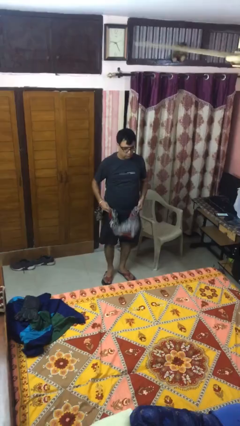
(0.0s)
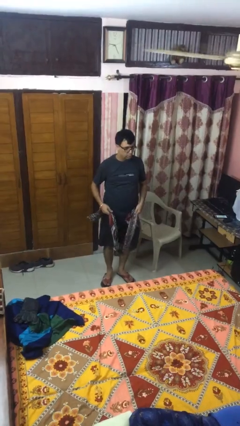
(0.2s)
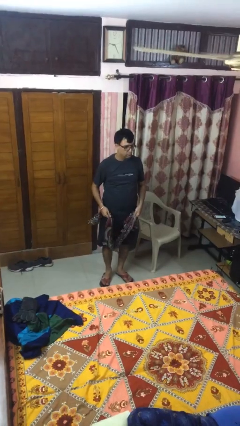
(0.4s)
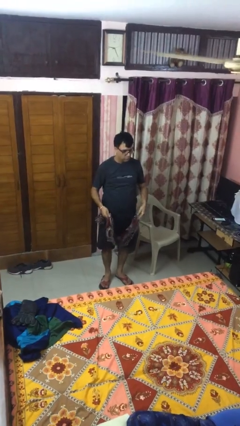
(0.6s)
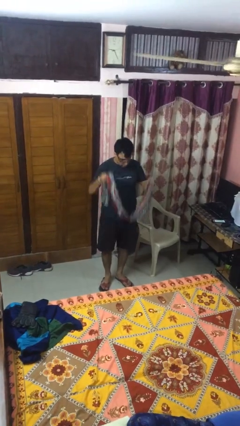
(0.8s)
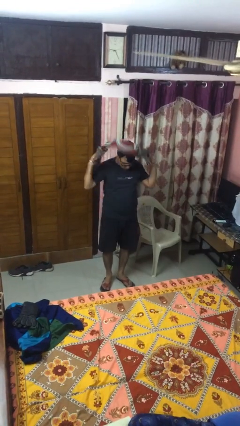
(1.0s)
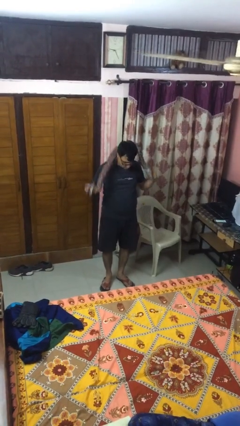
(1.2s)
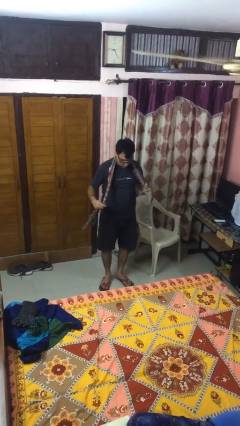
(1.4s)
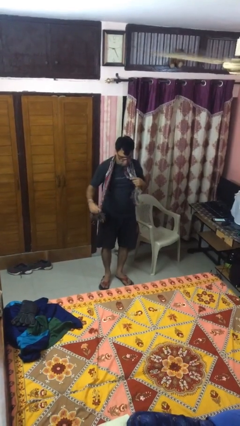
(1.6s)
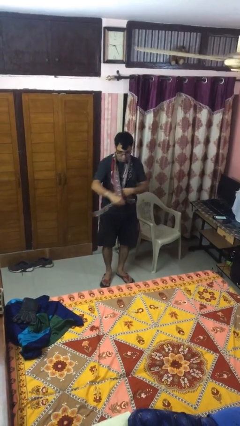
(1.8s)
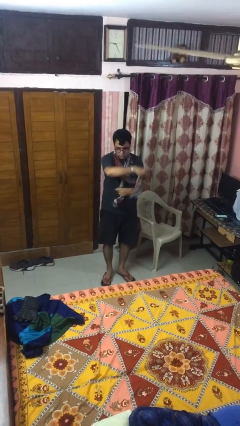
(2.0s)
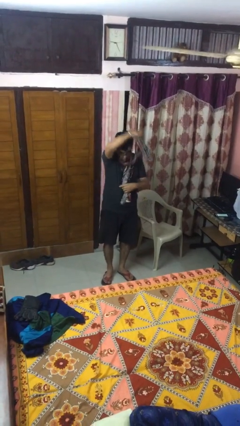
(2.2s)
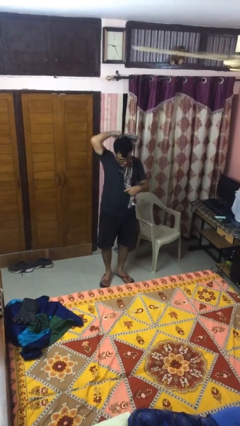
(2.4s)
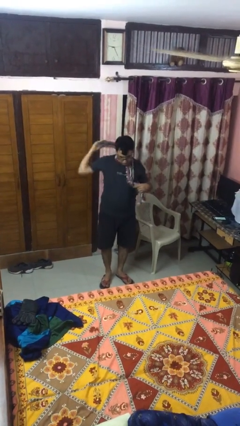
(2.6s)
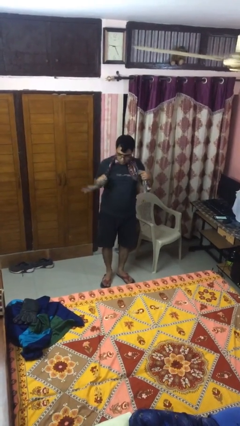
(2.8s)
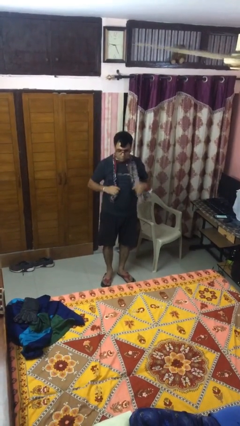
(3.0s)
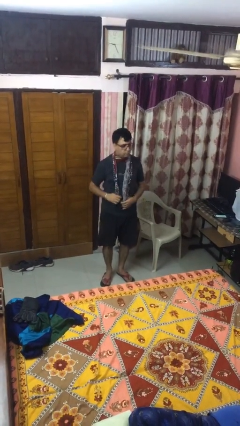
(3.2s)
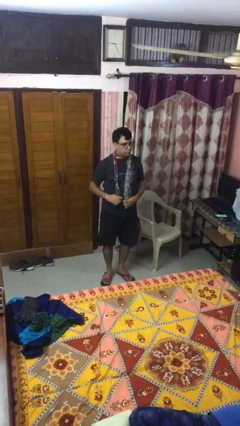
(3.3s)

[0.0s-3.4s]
person puts on scarf

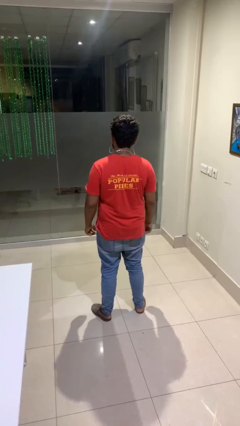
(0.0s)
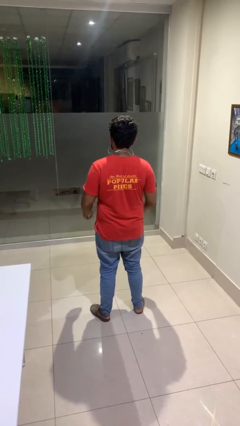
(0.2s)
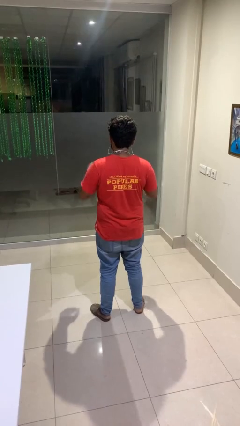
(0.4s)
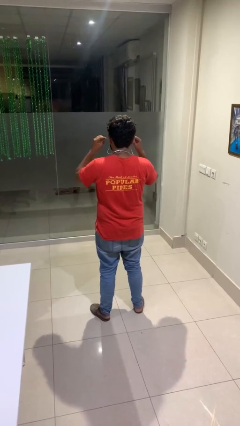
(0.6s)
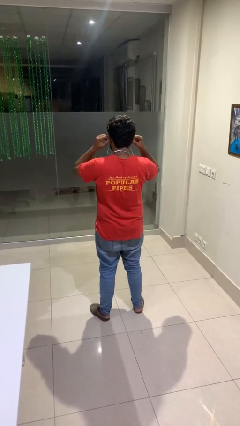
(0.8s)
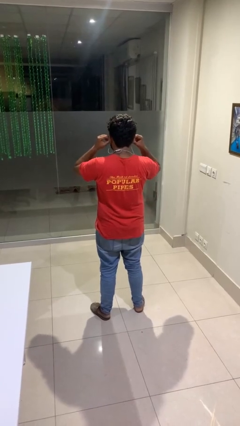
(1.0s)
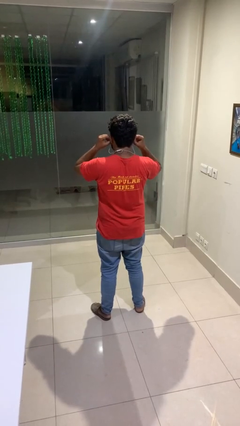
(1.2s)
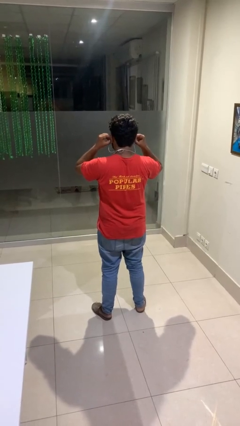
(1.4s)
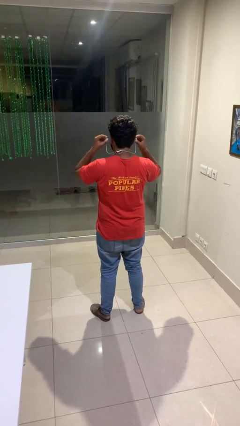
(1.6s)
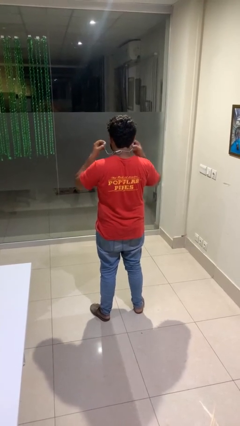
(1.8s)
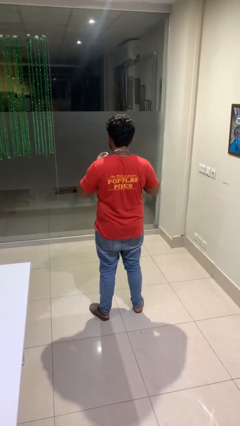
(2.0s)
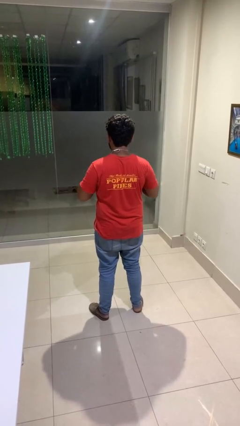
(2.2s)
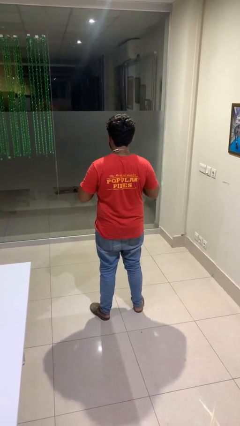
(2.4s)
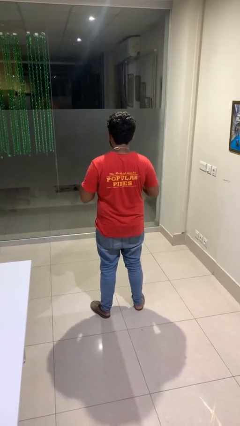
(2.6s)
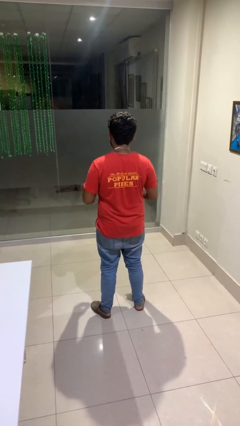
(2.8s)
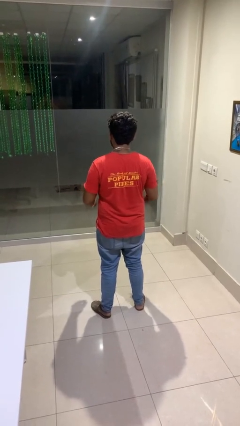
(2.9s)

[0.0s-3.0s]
person takes off headphones

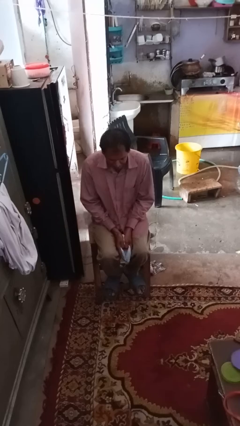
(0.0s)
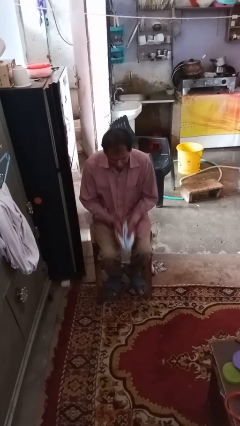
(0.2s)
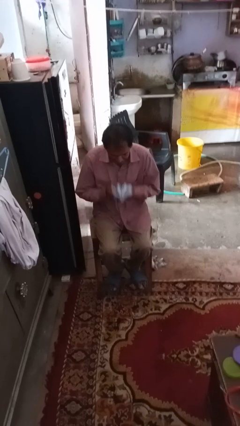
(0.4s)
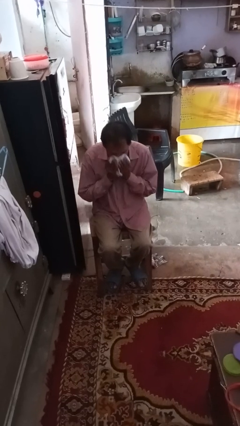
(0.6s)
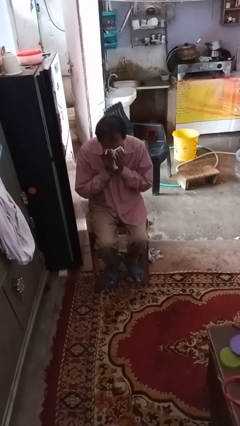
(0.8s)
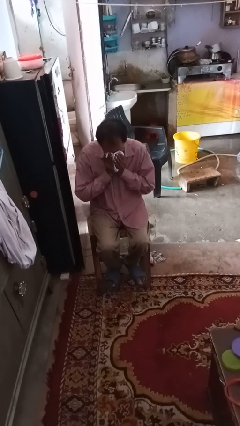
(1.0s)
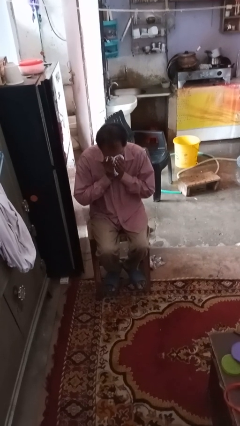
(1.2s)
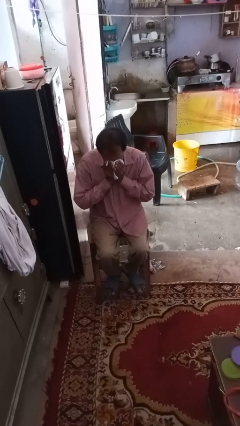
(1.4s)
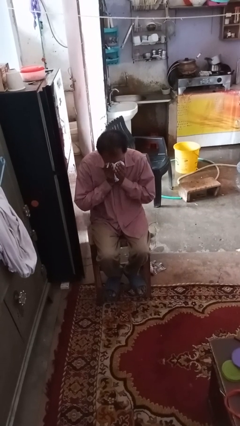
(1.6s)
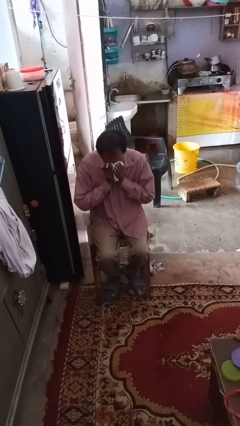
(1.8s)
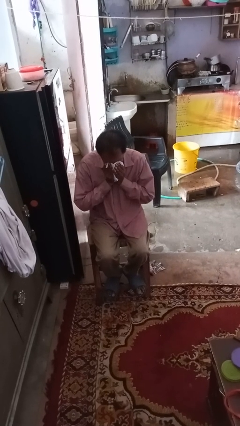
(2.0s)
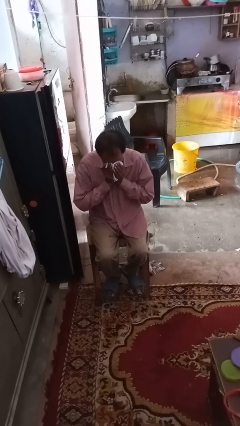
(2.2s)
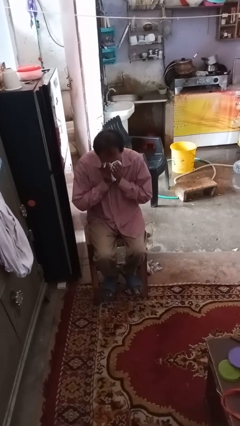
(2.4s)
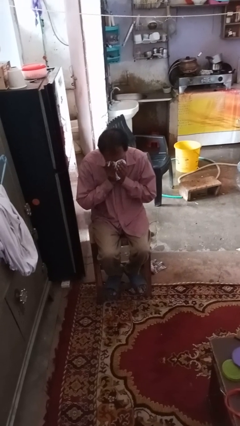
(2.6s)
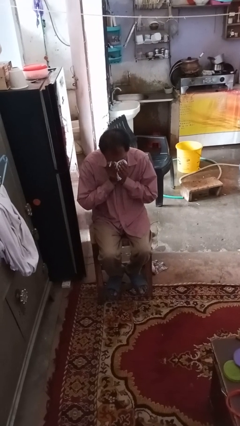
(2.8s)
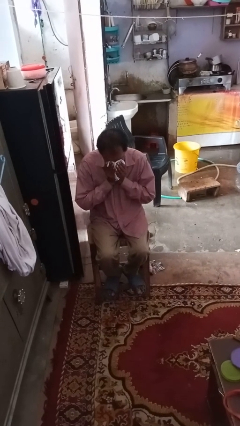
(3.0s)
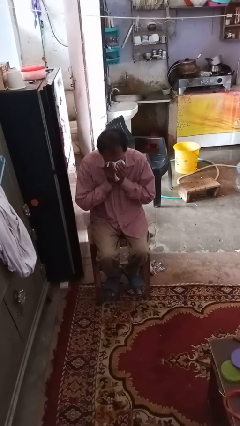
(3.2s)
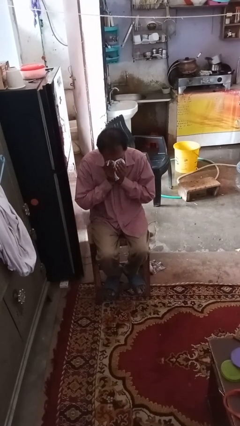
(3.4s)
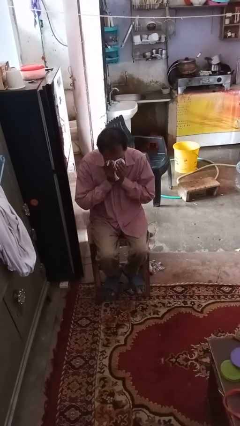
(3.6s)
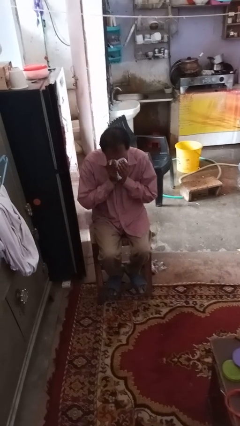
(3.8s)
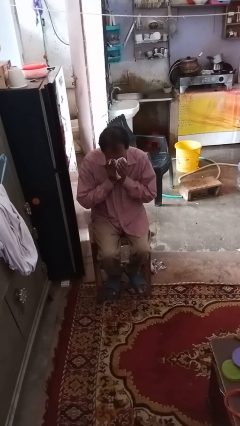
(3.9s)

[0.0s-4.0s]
person blows nose

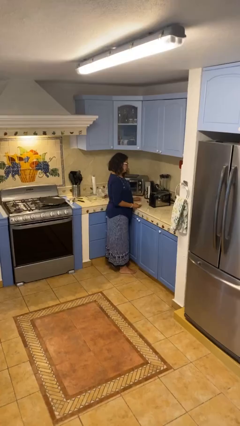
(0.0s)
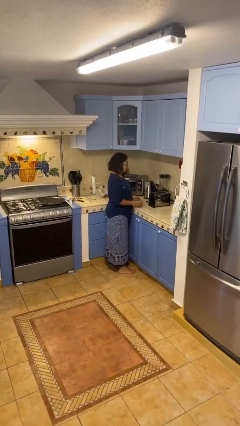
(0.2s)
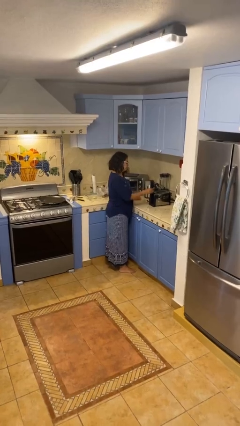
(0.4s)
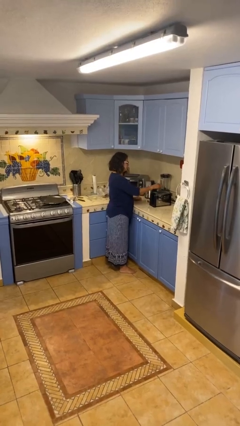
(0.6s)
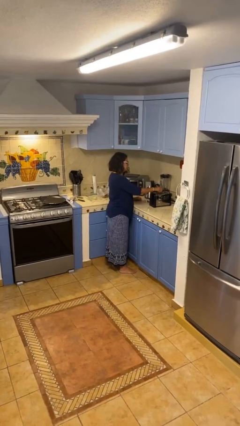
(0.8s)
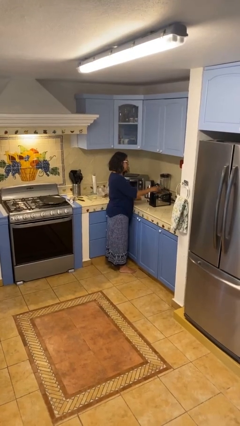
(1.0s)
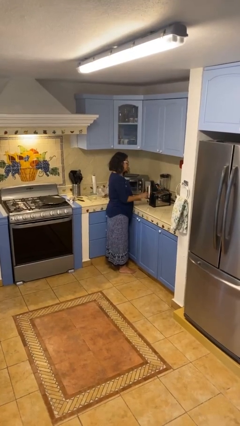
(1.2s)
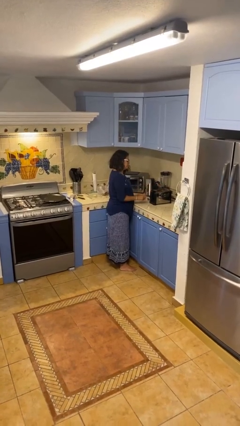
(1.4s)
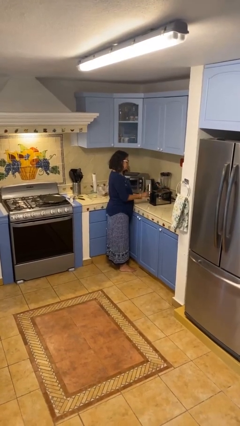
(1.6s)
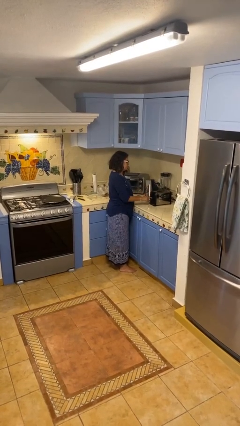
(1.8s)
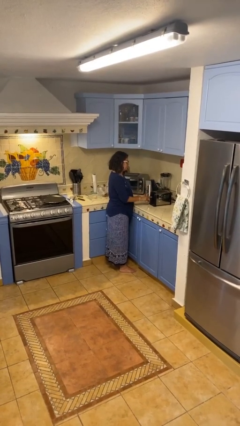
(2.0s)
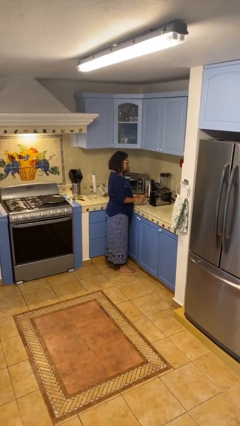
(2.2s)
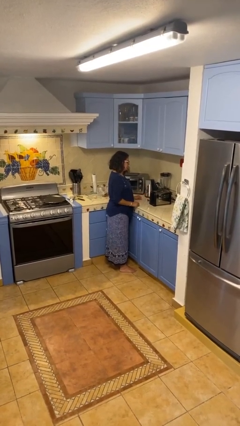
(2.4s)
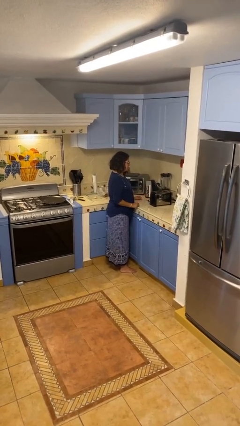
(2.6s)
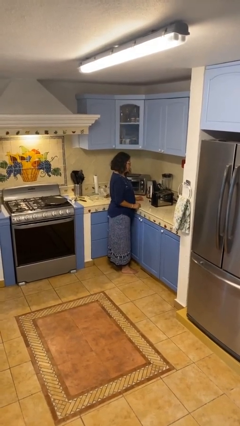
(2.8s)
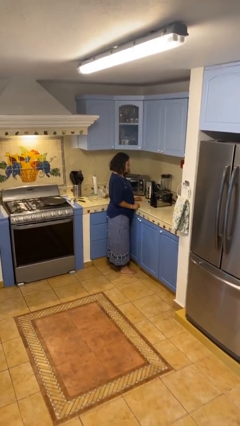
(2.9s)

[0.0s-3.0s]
person puts object into toaster

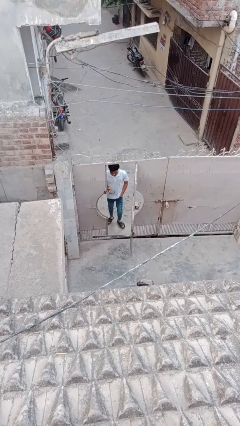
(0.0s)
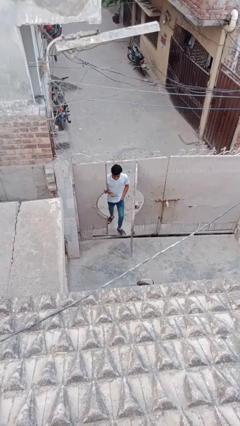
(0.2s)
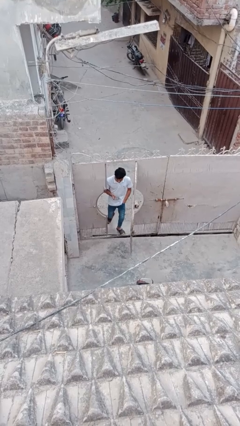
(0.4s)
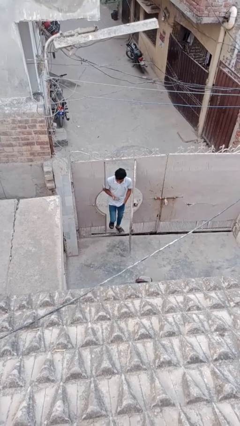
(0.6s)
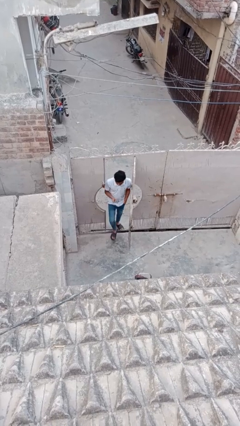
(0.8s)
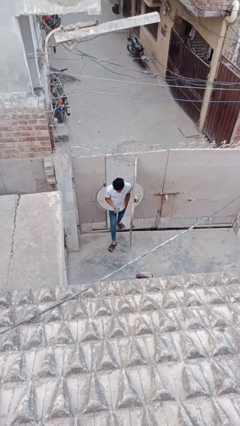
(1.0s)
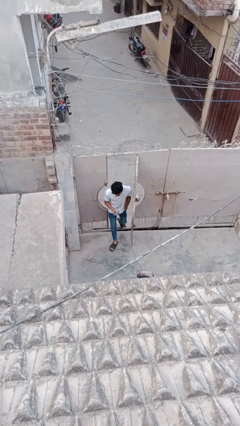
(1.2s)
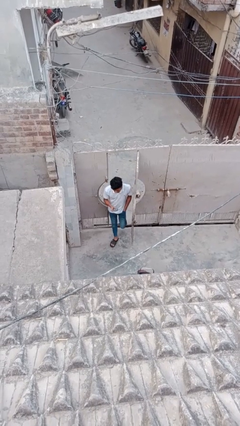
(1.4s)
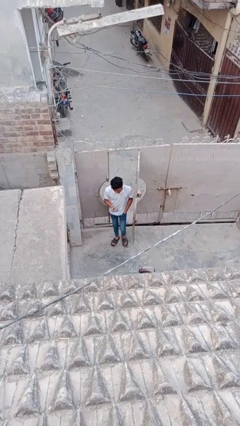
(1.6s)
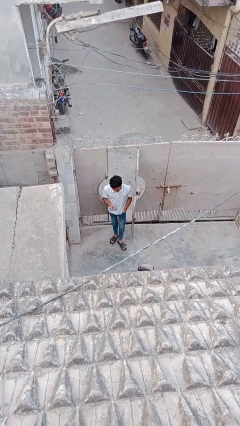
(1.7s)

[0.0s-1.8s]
person enters scene through structure

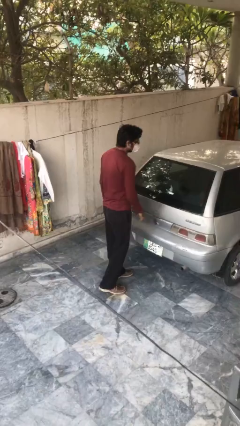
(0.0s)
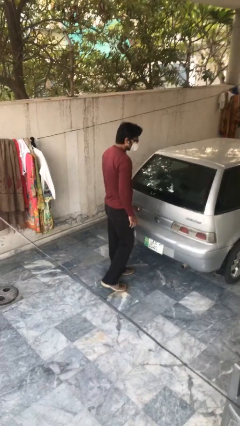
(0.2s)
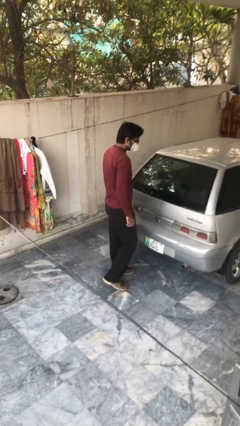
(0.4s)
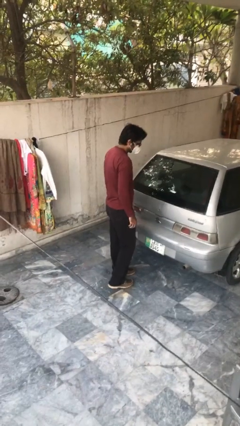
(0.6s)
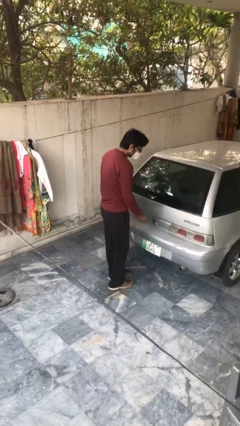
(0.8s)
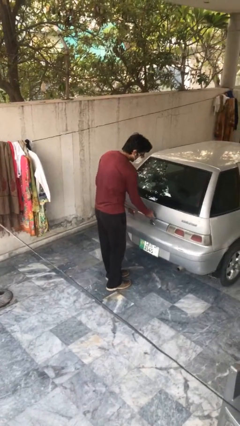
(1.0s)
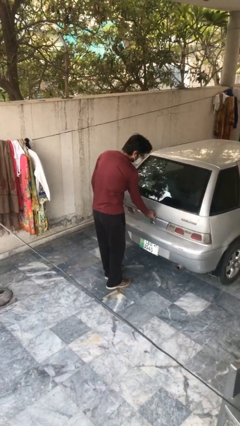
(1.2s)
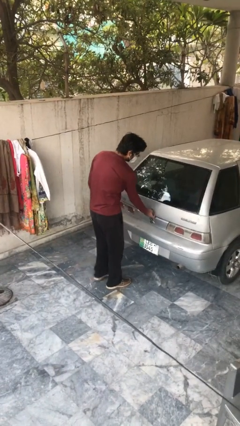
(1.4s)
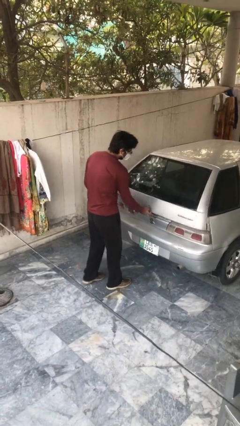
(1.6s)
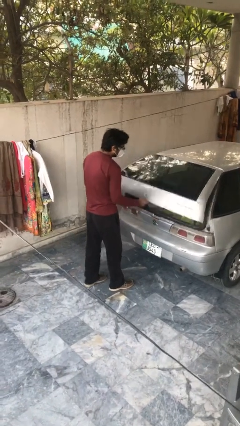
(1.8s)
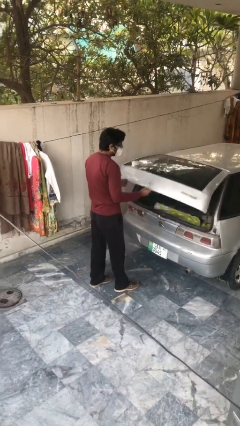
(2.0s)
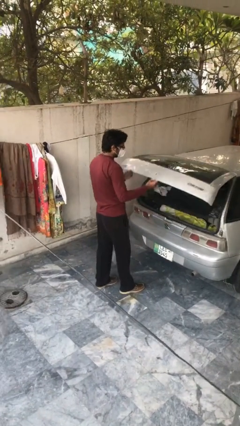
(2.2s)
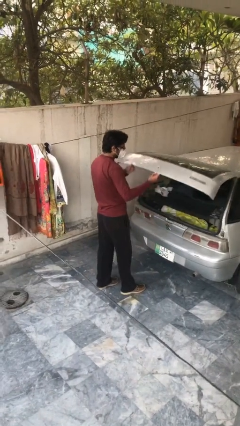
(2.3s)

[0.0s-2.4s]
person opens car trunk
